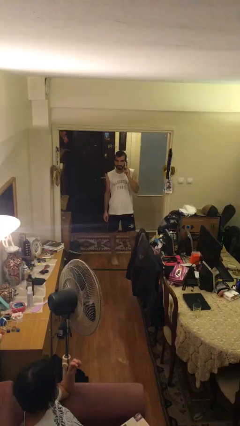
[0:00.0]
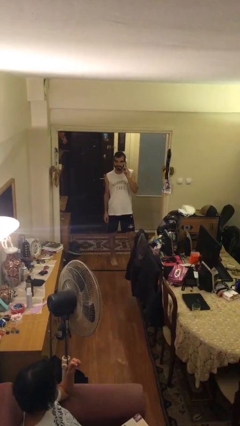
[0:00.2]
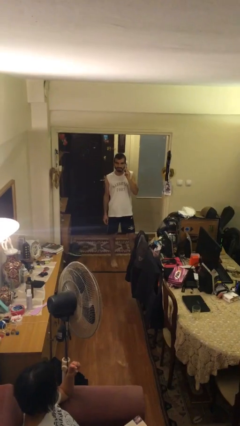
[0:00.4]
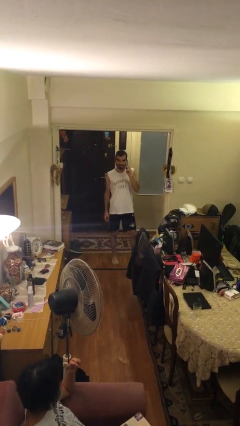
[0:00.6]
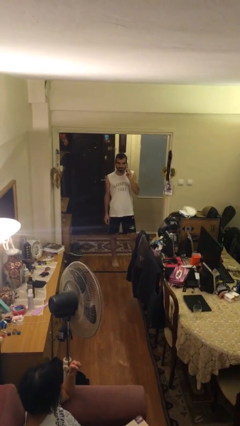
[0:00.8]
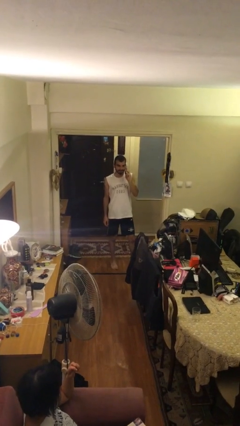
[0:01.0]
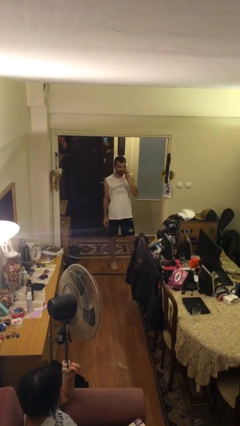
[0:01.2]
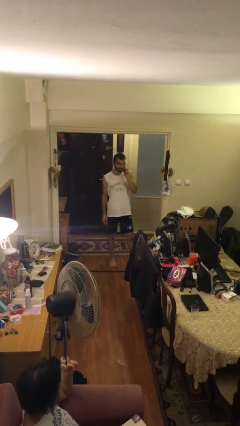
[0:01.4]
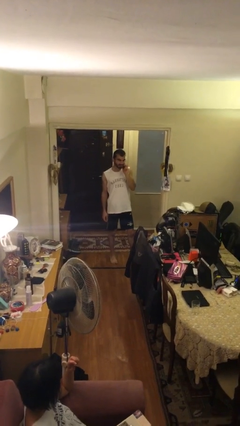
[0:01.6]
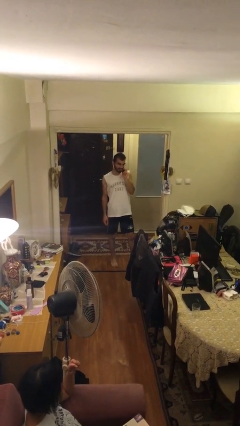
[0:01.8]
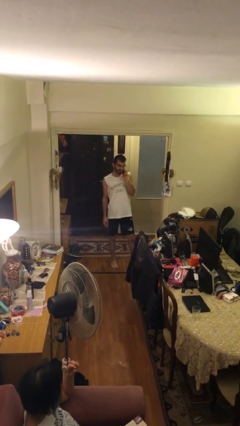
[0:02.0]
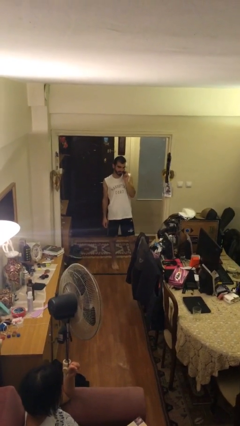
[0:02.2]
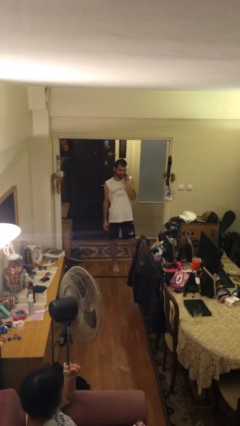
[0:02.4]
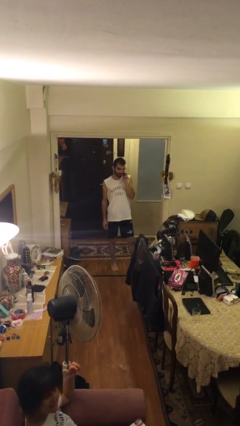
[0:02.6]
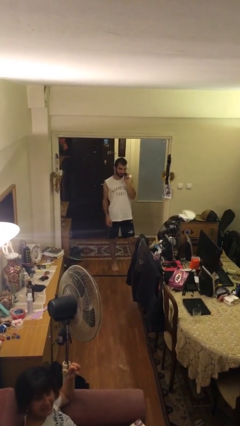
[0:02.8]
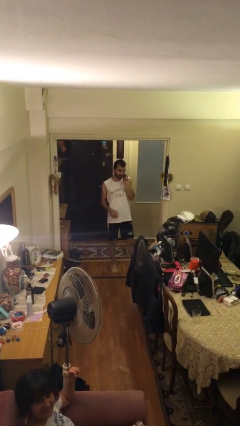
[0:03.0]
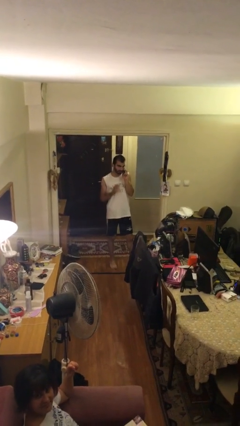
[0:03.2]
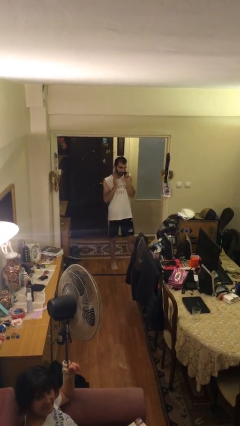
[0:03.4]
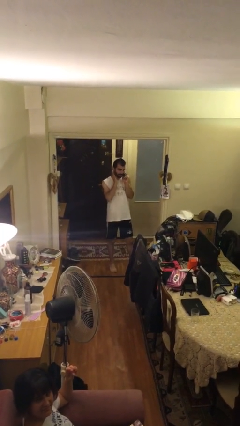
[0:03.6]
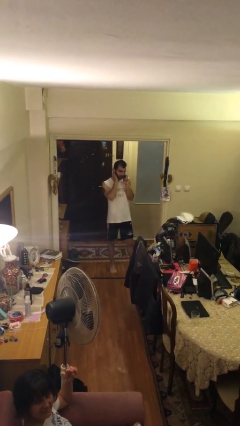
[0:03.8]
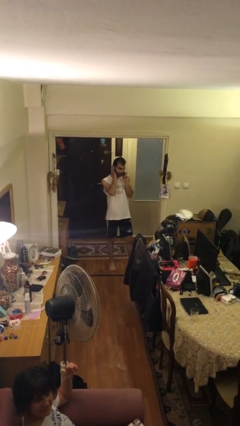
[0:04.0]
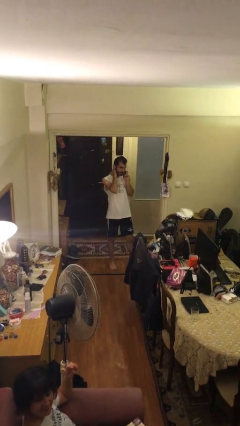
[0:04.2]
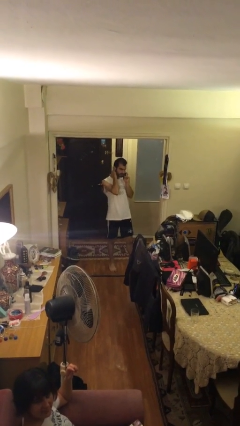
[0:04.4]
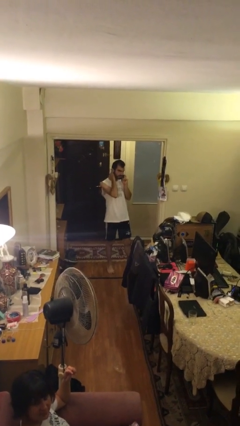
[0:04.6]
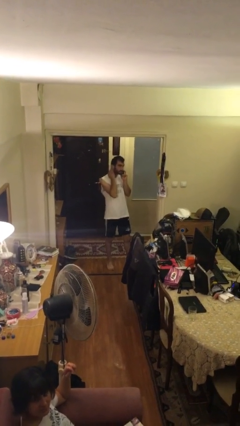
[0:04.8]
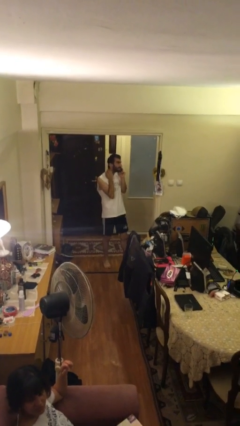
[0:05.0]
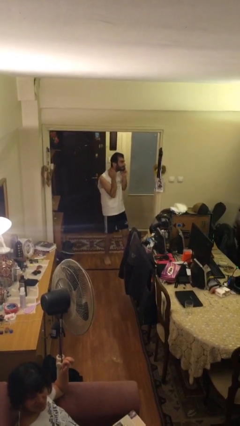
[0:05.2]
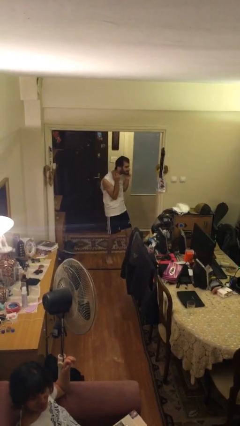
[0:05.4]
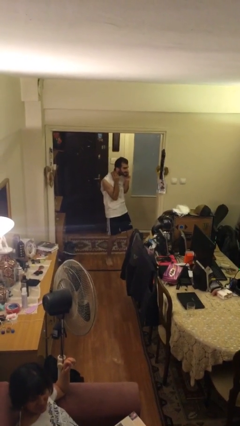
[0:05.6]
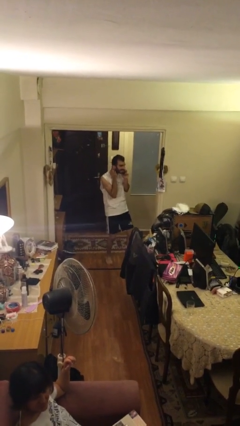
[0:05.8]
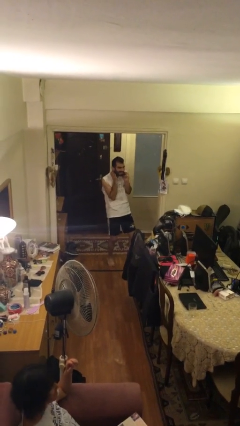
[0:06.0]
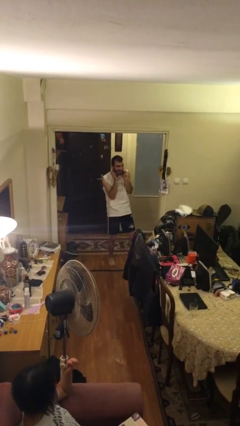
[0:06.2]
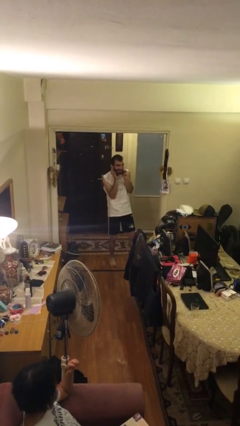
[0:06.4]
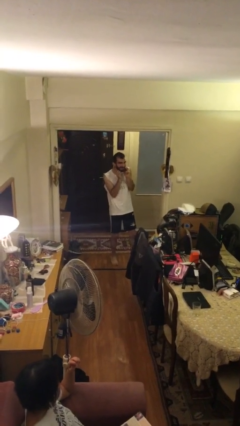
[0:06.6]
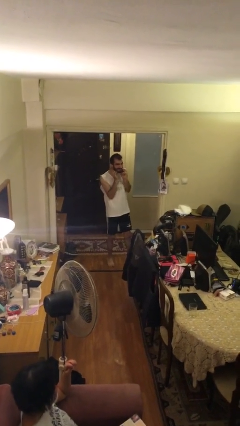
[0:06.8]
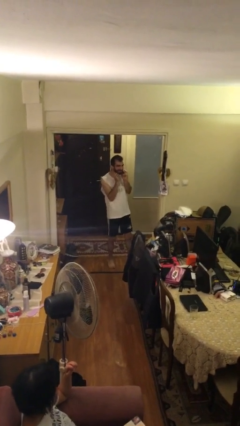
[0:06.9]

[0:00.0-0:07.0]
person talks on phone

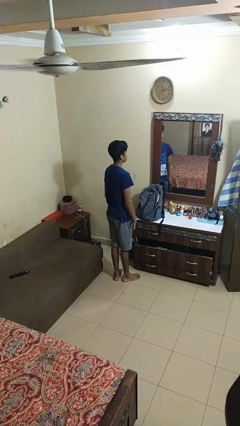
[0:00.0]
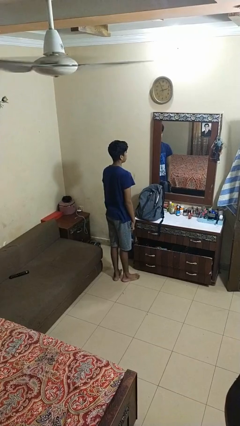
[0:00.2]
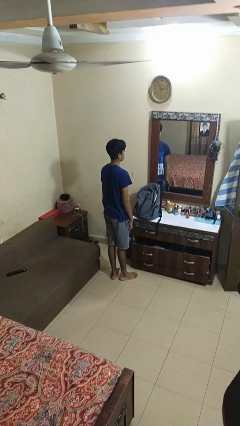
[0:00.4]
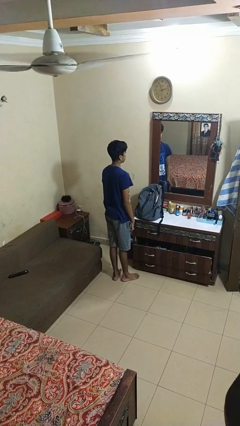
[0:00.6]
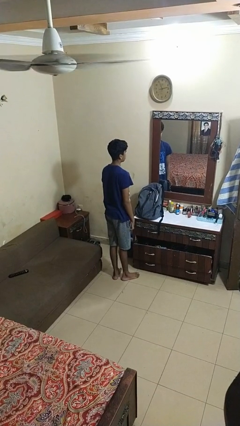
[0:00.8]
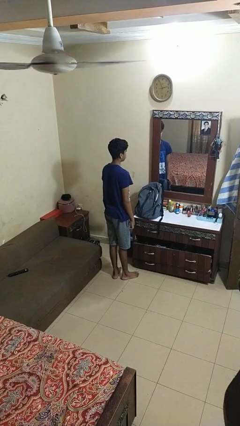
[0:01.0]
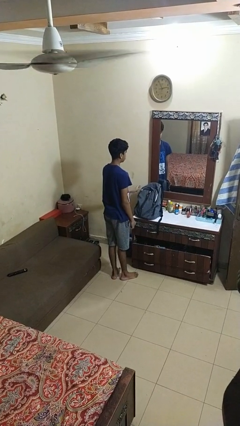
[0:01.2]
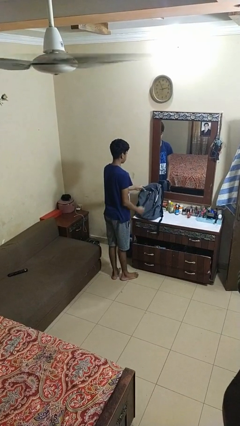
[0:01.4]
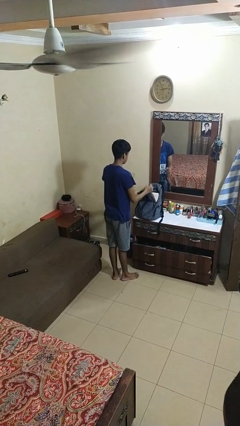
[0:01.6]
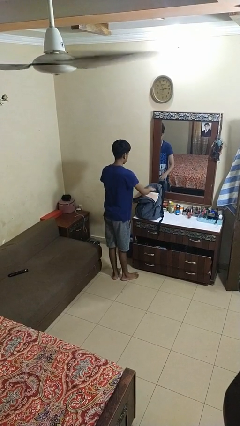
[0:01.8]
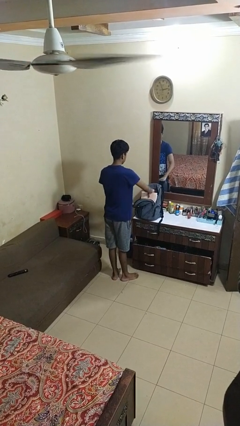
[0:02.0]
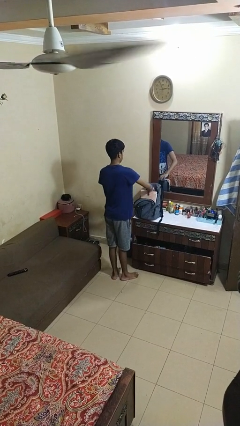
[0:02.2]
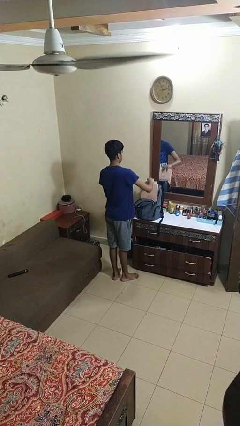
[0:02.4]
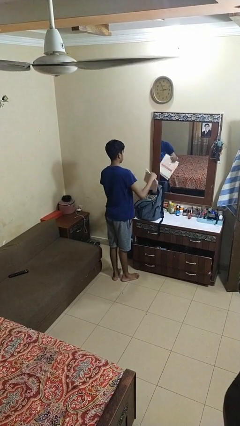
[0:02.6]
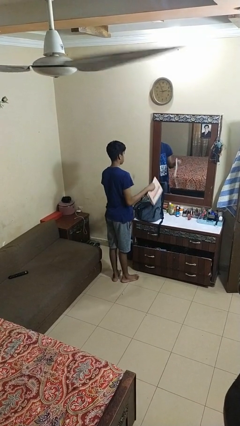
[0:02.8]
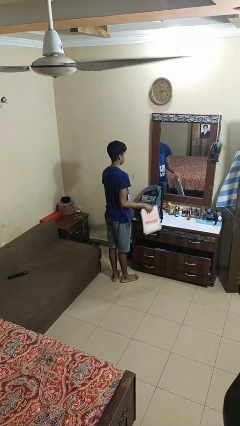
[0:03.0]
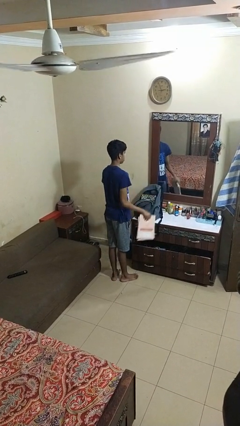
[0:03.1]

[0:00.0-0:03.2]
person takes object from bag

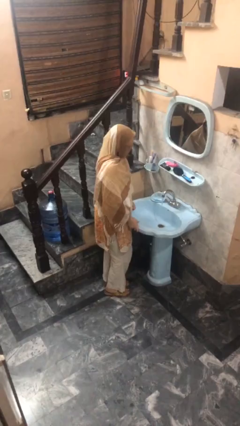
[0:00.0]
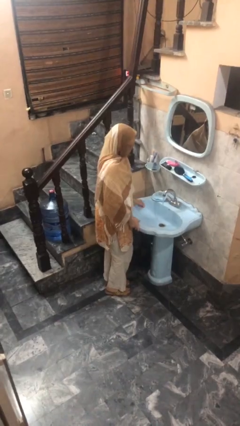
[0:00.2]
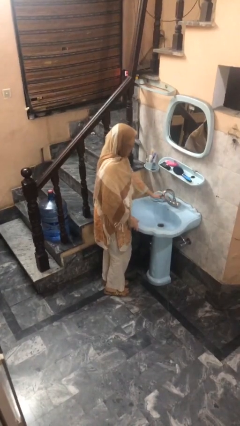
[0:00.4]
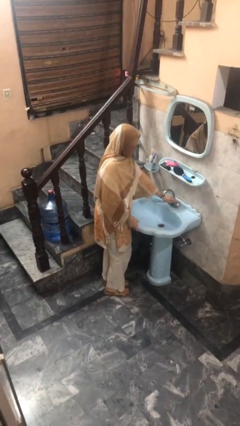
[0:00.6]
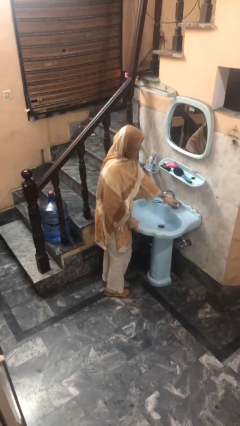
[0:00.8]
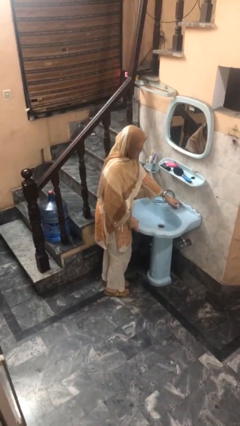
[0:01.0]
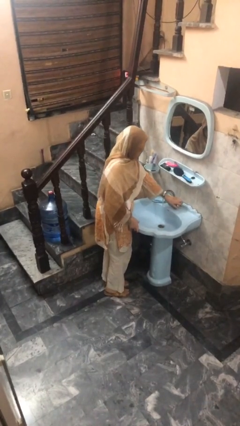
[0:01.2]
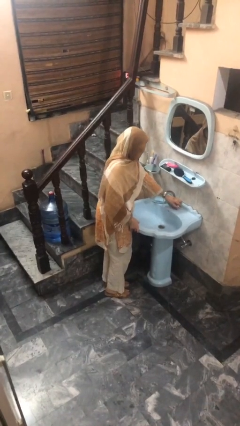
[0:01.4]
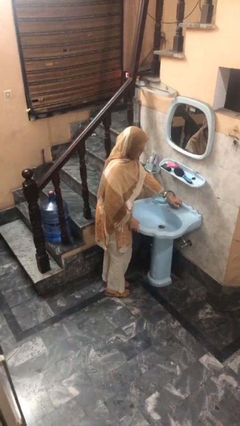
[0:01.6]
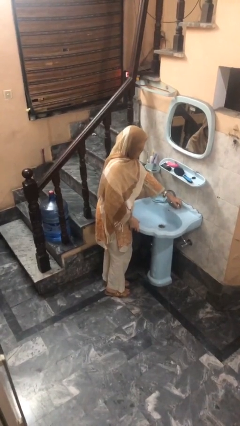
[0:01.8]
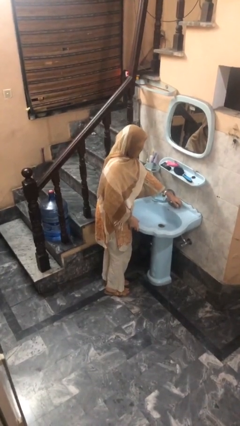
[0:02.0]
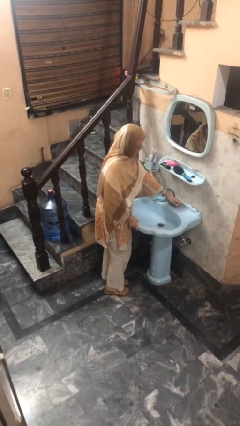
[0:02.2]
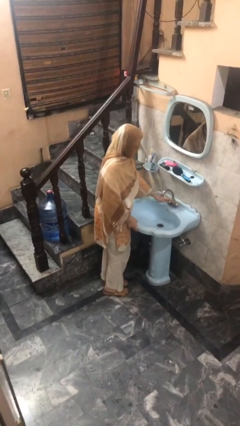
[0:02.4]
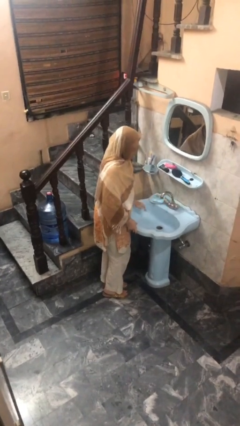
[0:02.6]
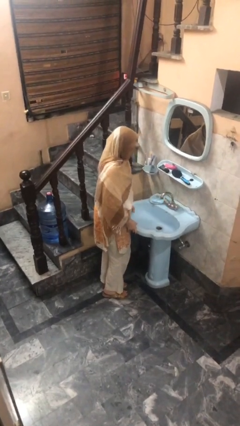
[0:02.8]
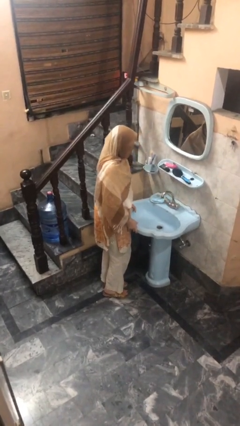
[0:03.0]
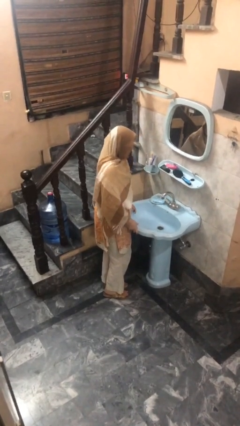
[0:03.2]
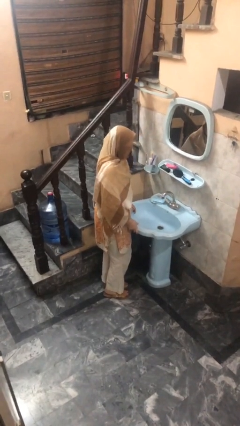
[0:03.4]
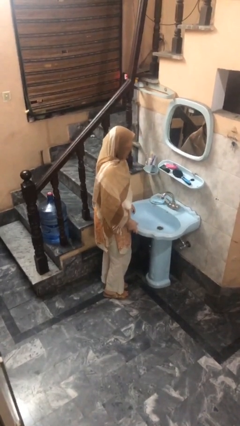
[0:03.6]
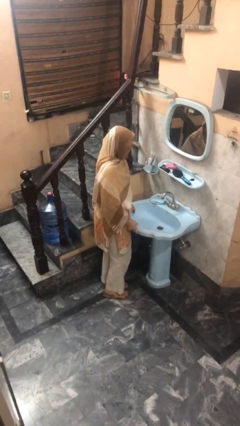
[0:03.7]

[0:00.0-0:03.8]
person turns off faucet

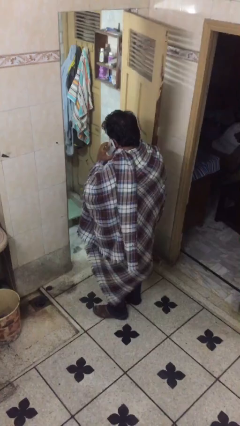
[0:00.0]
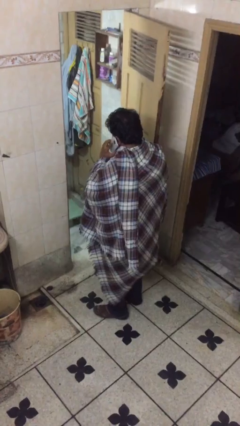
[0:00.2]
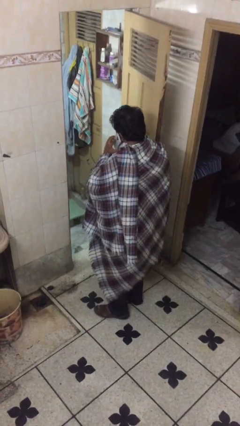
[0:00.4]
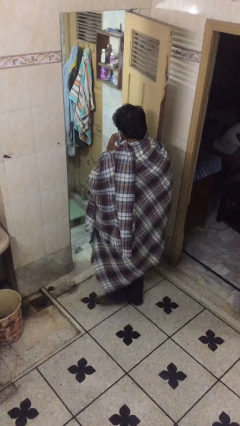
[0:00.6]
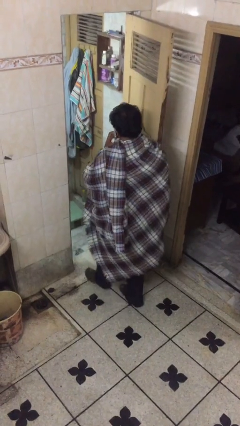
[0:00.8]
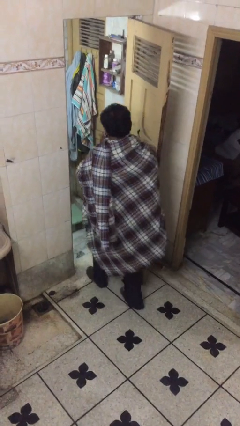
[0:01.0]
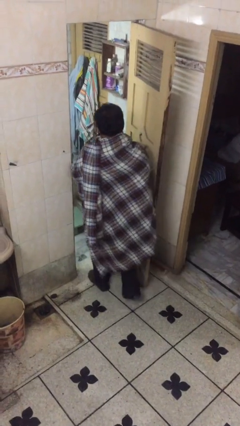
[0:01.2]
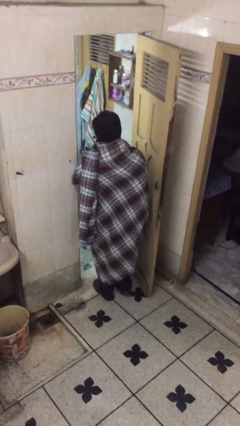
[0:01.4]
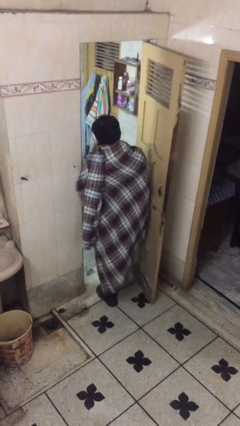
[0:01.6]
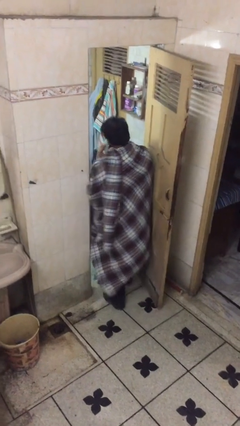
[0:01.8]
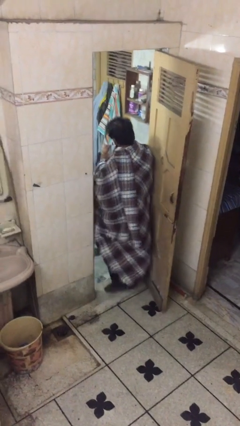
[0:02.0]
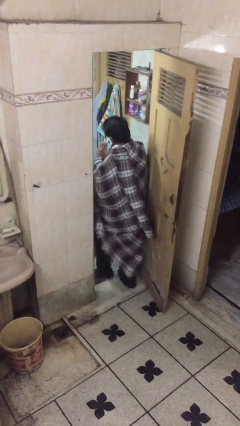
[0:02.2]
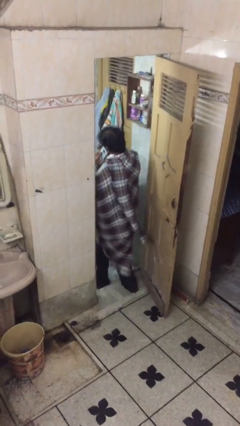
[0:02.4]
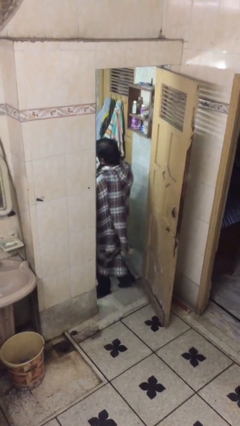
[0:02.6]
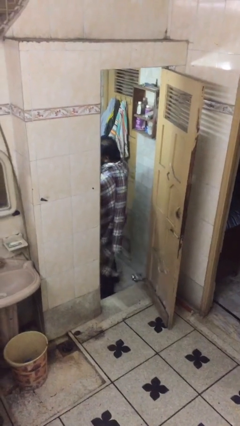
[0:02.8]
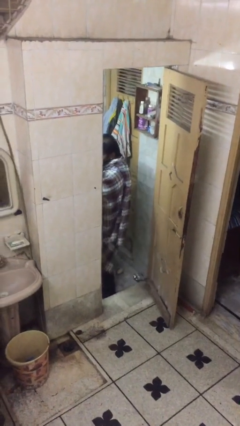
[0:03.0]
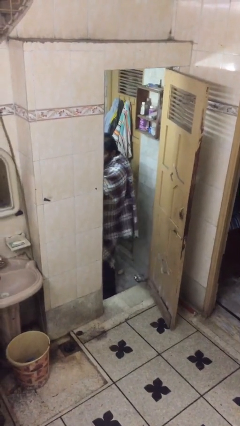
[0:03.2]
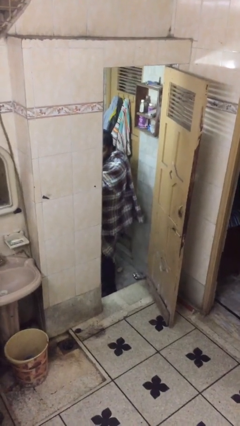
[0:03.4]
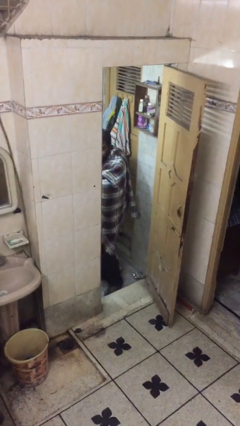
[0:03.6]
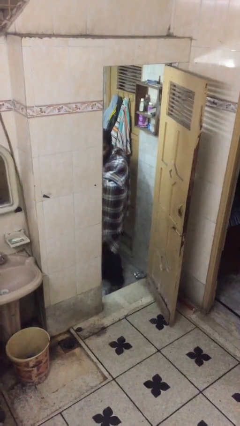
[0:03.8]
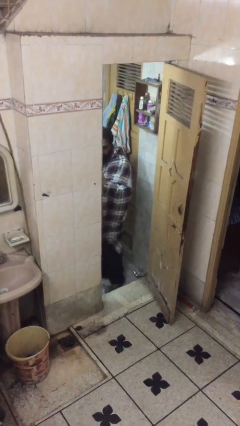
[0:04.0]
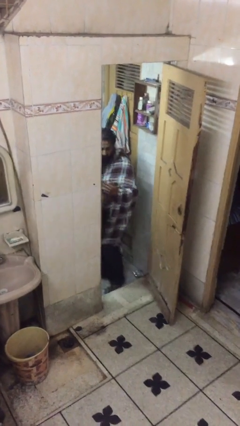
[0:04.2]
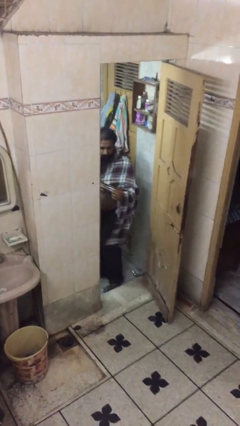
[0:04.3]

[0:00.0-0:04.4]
person exits scene through structure
